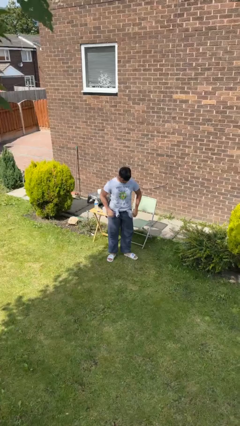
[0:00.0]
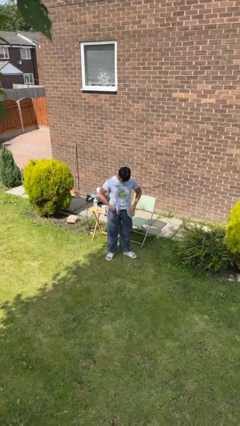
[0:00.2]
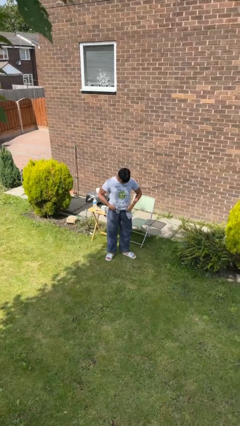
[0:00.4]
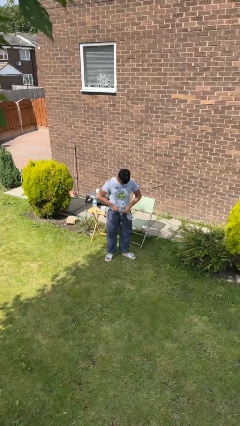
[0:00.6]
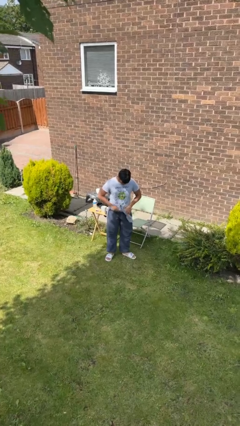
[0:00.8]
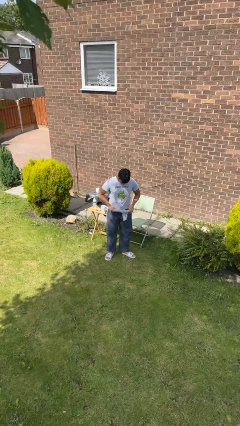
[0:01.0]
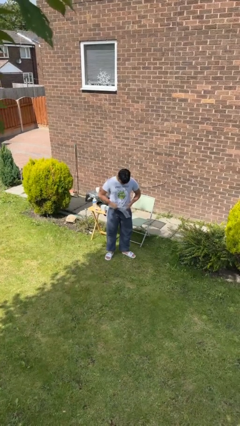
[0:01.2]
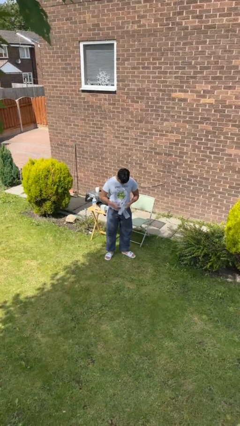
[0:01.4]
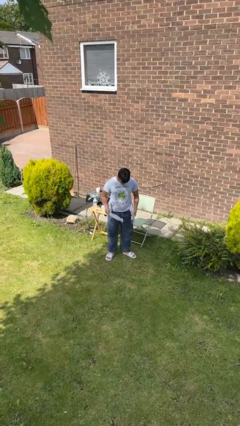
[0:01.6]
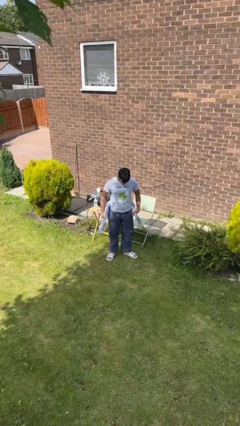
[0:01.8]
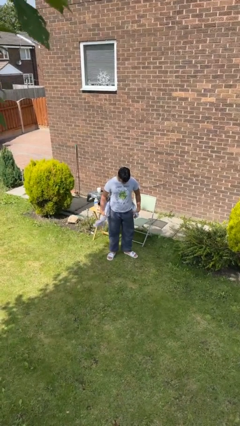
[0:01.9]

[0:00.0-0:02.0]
person unties jacket around waist

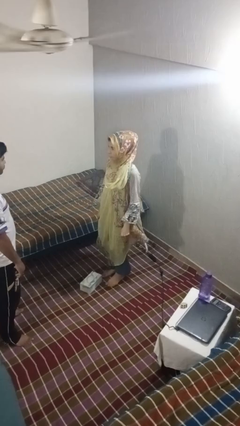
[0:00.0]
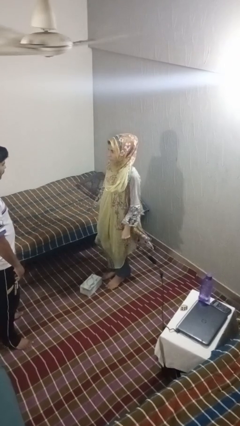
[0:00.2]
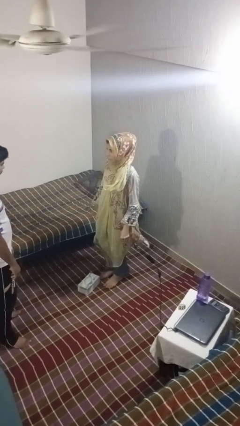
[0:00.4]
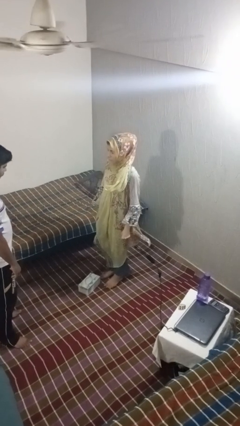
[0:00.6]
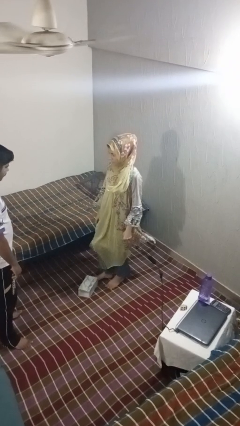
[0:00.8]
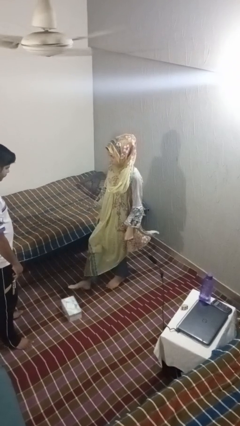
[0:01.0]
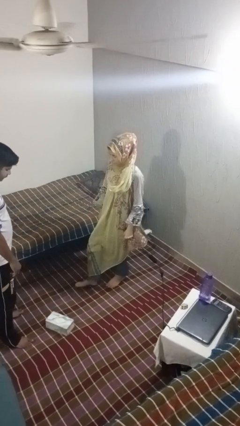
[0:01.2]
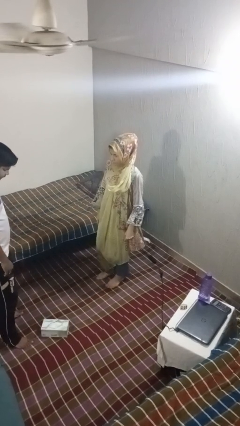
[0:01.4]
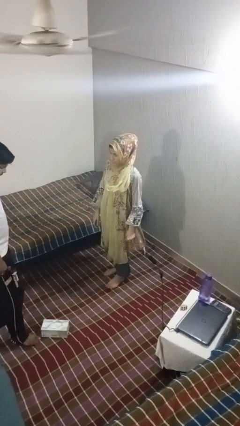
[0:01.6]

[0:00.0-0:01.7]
person kicks object to person

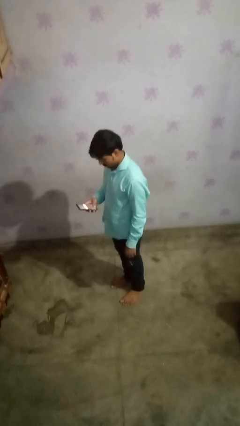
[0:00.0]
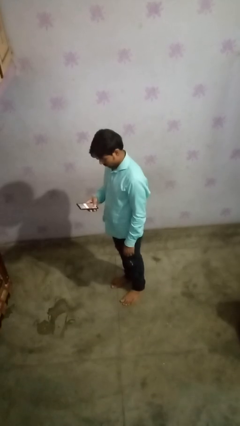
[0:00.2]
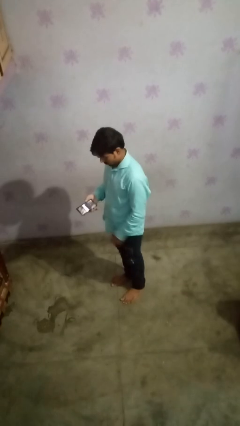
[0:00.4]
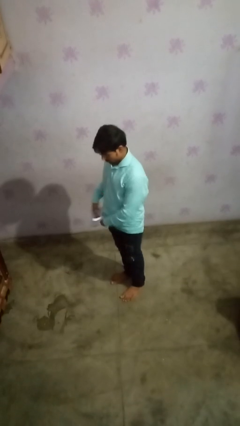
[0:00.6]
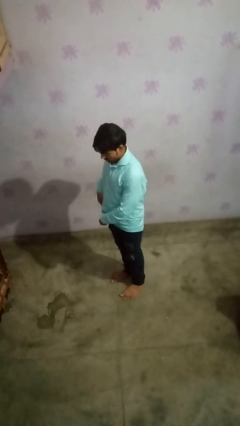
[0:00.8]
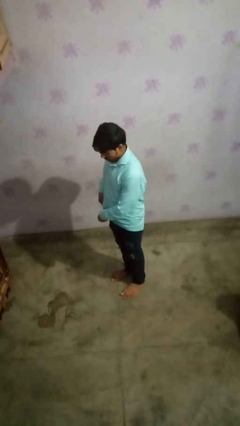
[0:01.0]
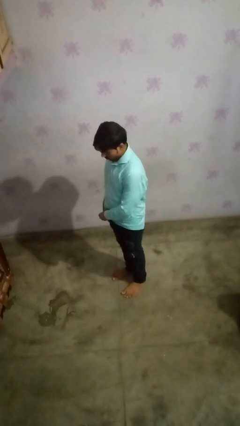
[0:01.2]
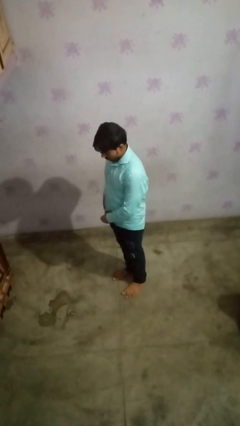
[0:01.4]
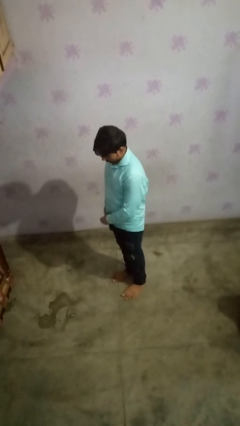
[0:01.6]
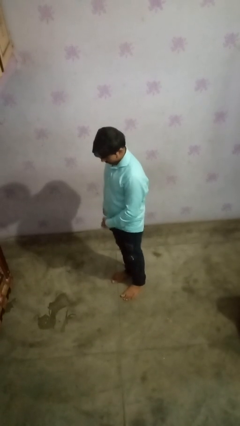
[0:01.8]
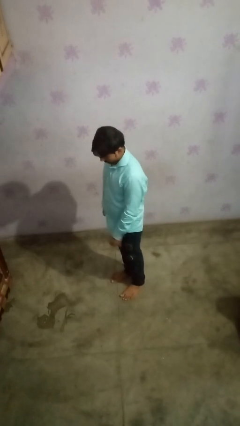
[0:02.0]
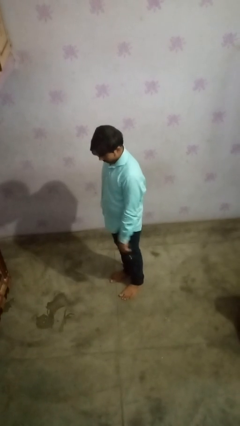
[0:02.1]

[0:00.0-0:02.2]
person puts phone into pocket

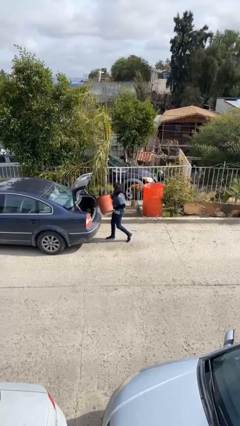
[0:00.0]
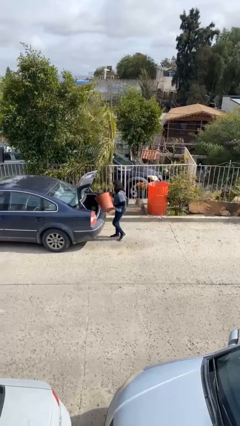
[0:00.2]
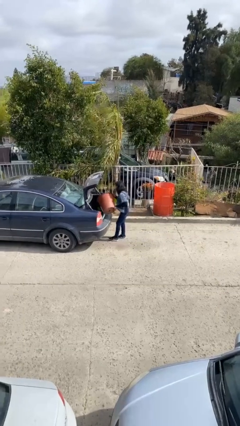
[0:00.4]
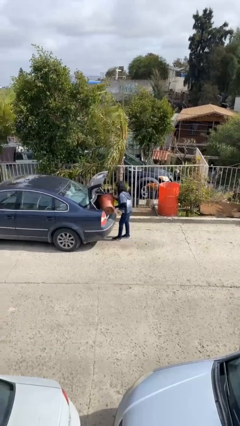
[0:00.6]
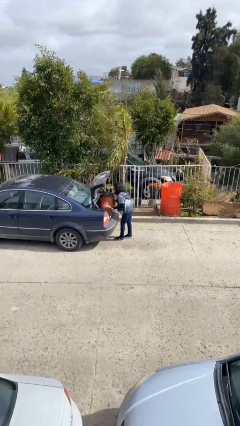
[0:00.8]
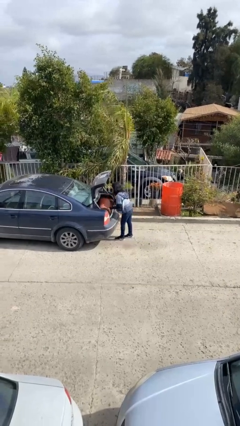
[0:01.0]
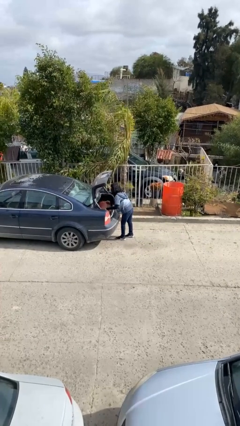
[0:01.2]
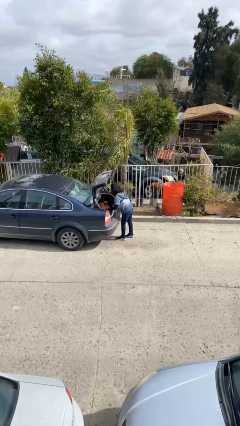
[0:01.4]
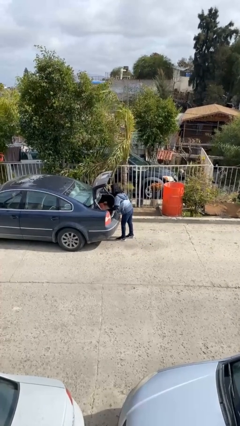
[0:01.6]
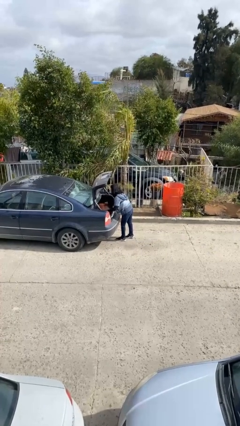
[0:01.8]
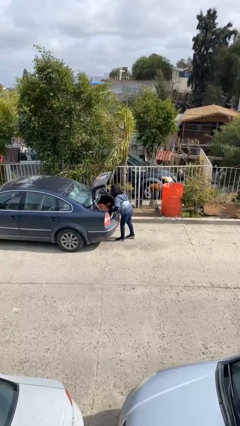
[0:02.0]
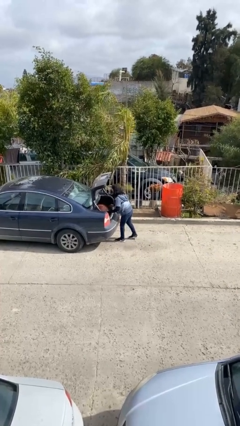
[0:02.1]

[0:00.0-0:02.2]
person loads car

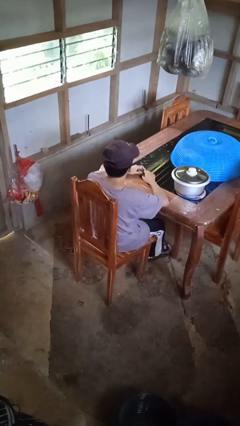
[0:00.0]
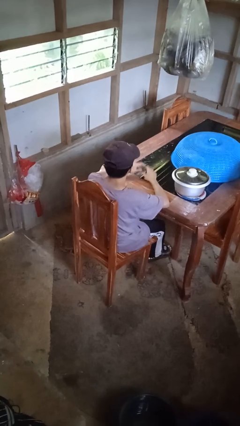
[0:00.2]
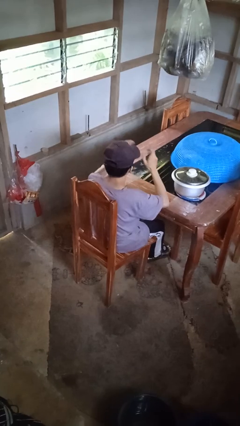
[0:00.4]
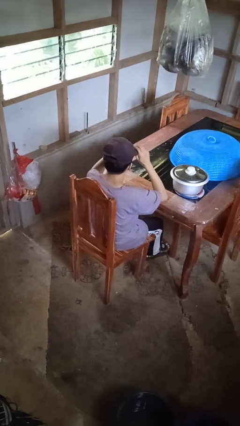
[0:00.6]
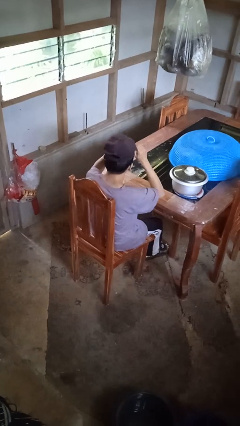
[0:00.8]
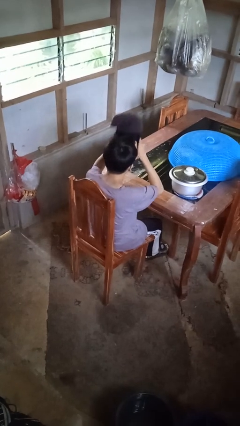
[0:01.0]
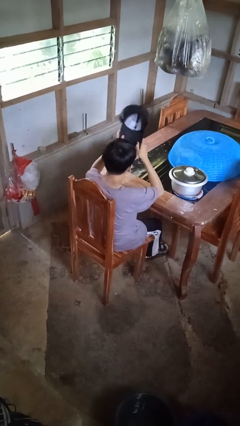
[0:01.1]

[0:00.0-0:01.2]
person takes off hat

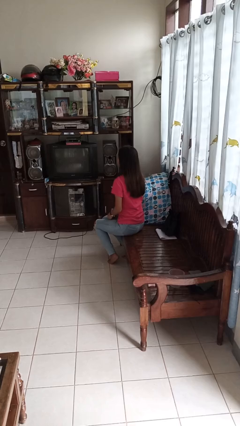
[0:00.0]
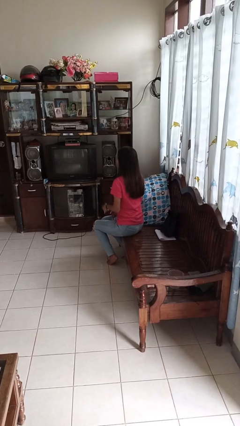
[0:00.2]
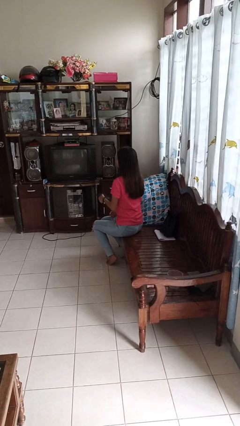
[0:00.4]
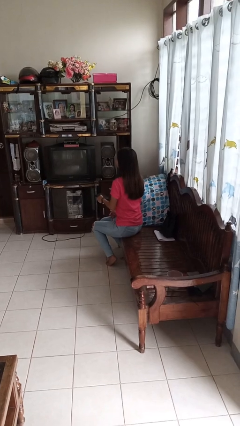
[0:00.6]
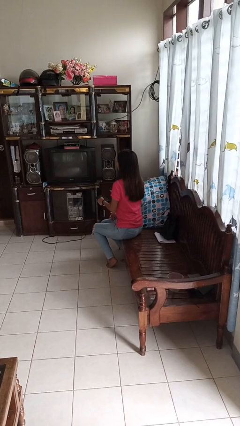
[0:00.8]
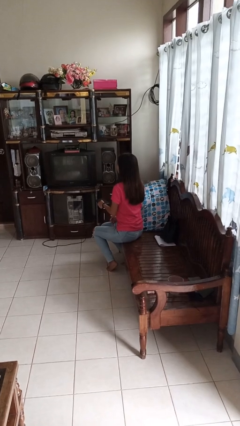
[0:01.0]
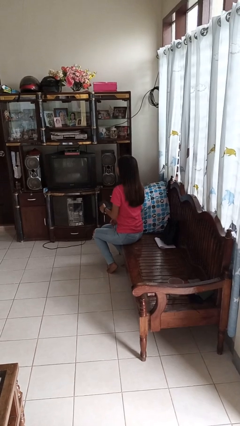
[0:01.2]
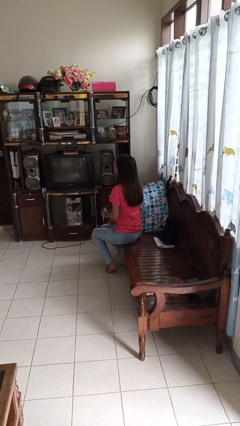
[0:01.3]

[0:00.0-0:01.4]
person uses television remote

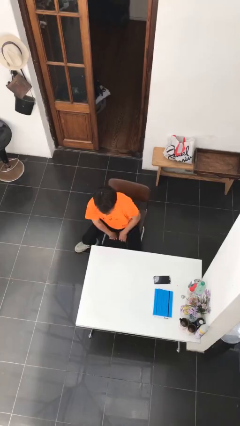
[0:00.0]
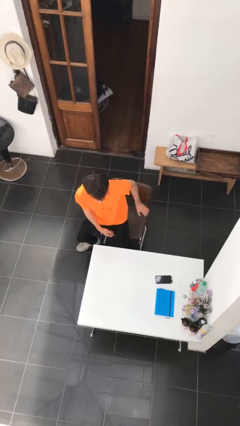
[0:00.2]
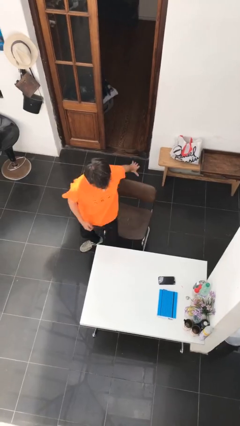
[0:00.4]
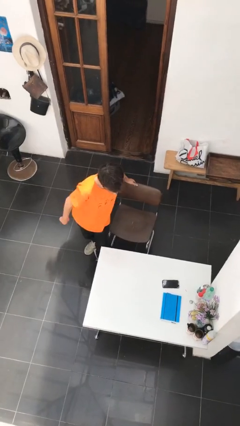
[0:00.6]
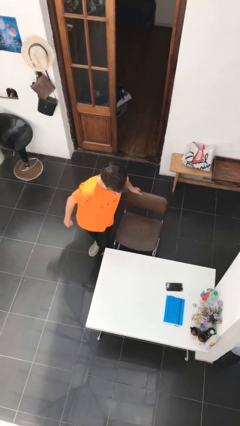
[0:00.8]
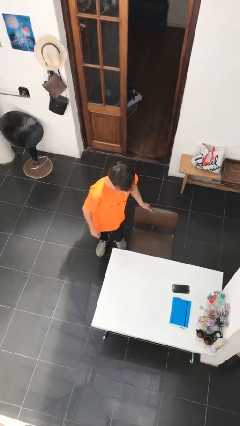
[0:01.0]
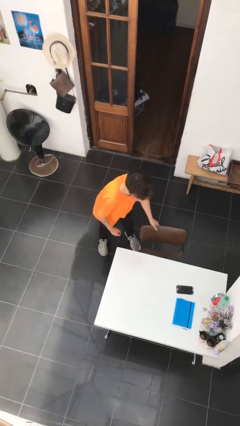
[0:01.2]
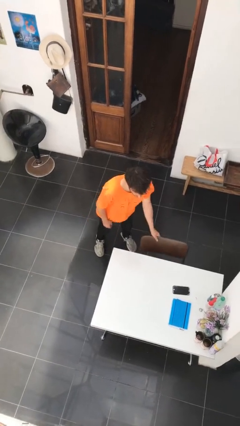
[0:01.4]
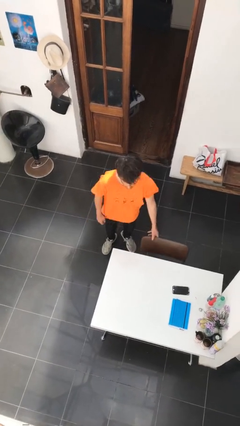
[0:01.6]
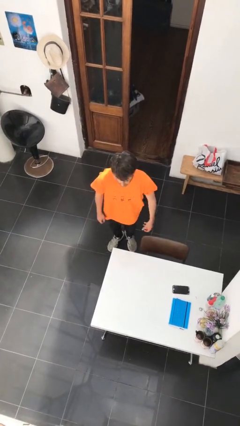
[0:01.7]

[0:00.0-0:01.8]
person stands up

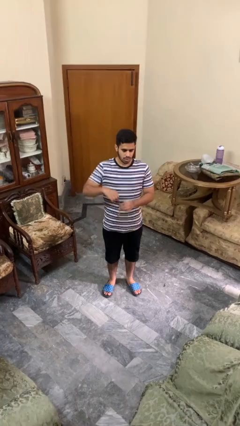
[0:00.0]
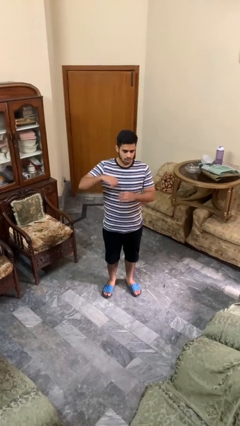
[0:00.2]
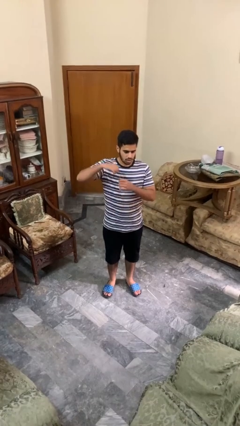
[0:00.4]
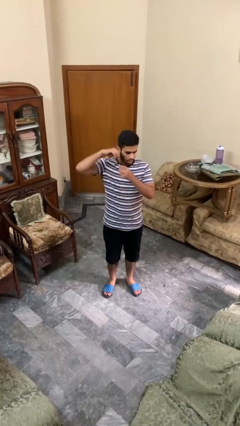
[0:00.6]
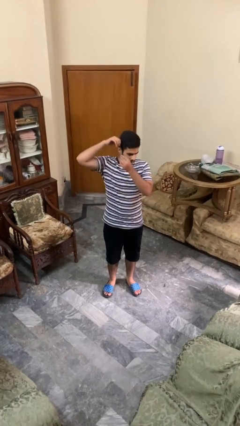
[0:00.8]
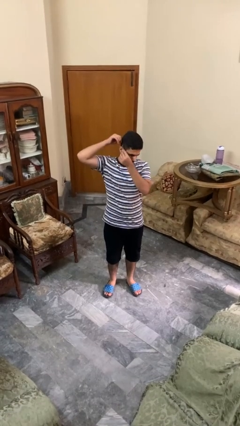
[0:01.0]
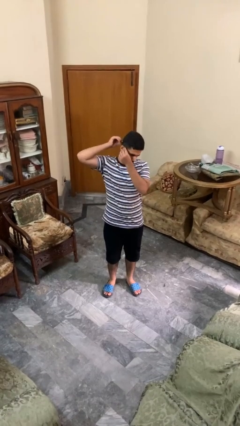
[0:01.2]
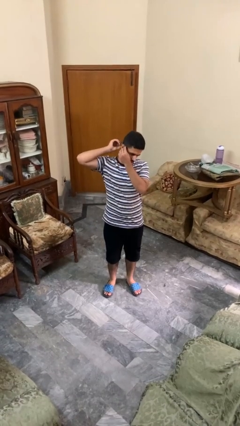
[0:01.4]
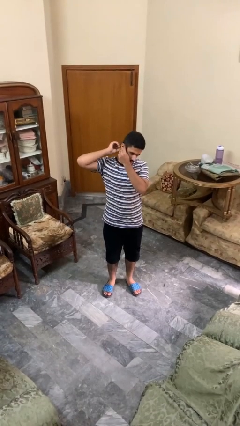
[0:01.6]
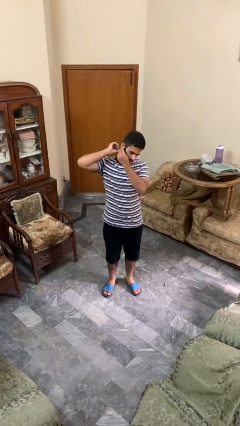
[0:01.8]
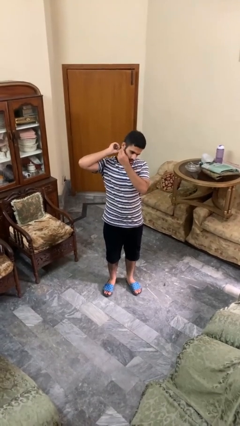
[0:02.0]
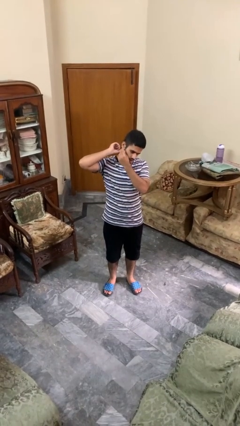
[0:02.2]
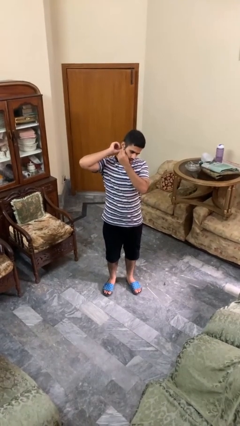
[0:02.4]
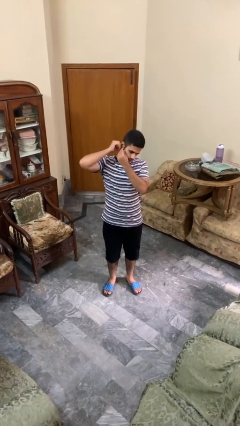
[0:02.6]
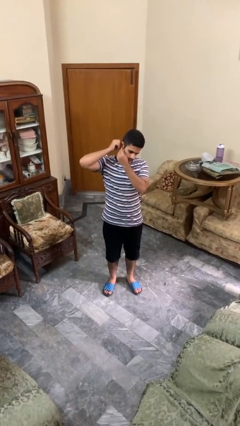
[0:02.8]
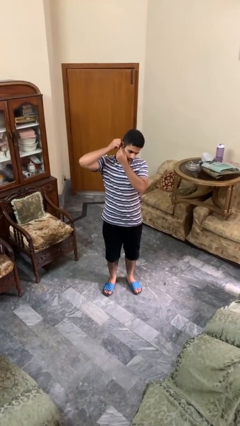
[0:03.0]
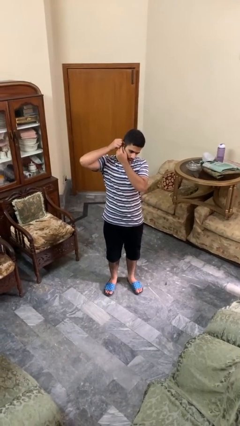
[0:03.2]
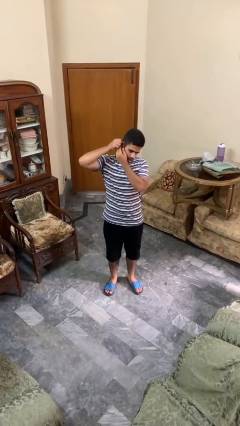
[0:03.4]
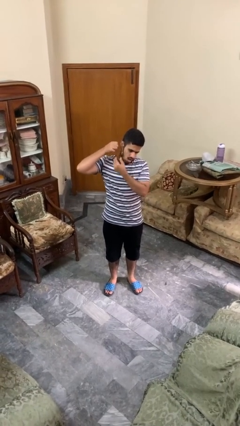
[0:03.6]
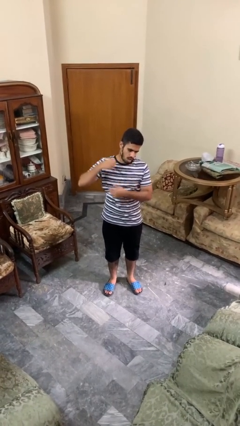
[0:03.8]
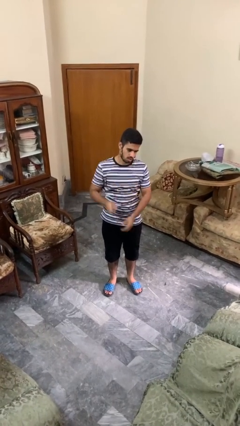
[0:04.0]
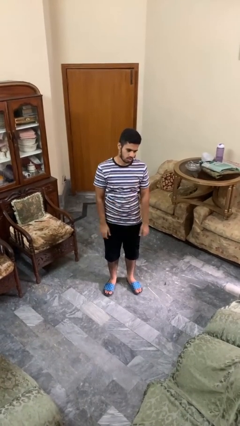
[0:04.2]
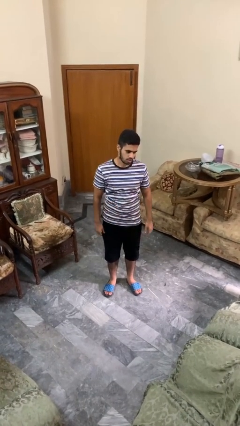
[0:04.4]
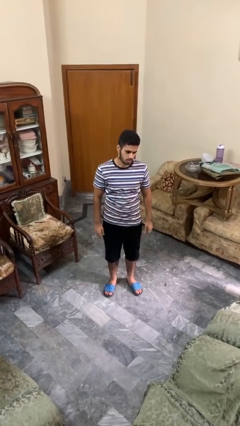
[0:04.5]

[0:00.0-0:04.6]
person puts on earrings
